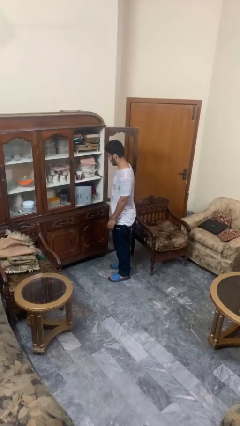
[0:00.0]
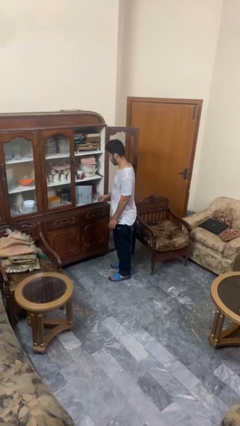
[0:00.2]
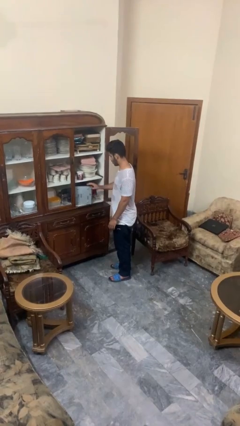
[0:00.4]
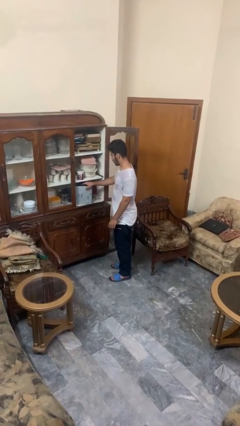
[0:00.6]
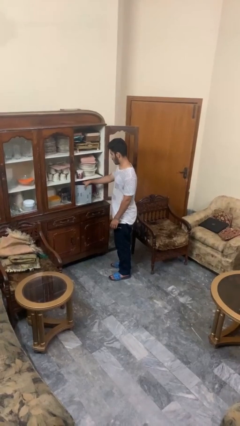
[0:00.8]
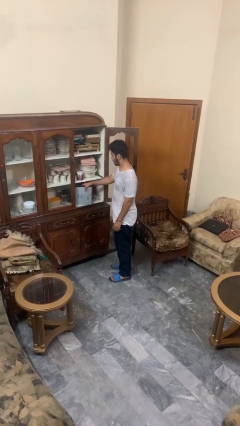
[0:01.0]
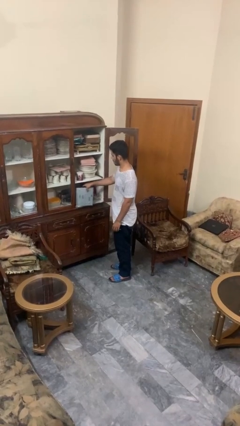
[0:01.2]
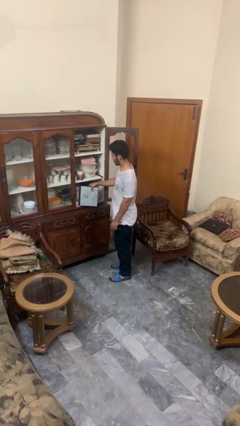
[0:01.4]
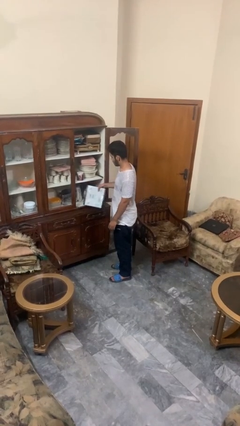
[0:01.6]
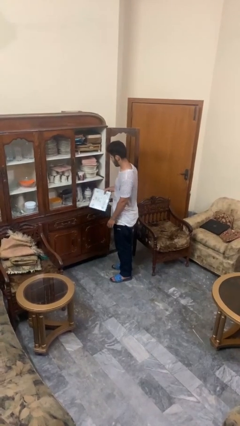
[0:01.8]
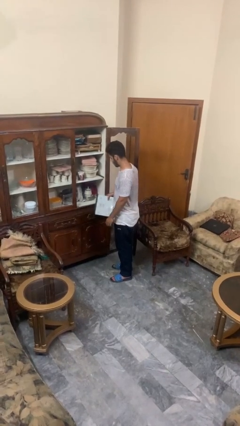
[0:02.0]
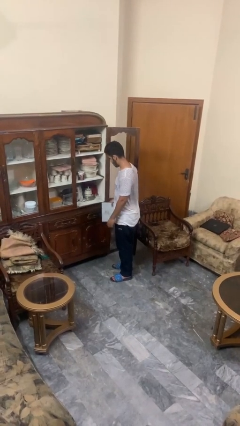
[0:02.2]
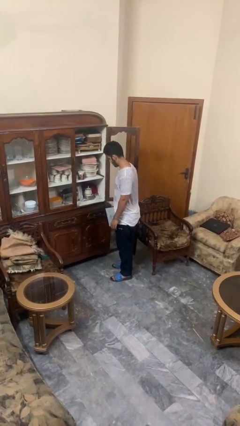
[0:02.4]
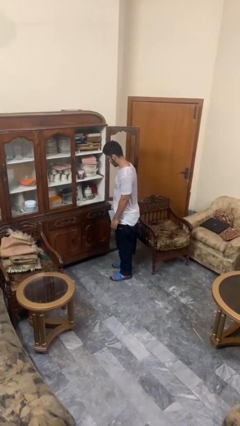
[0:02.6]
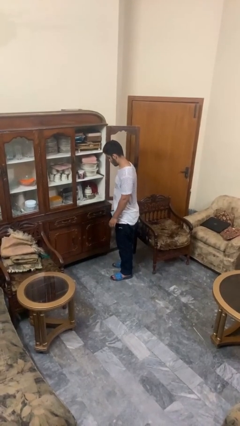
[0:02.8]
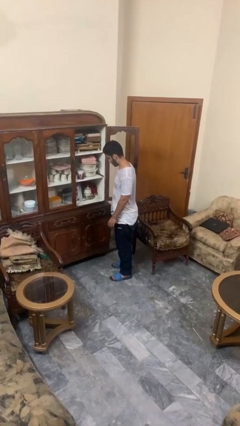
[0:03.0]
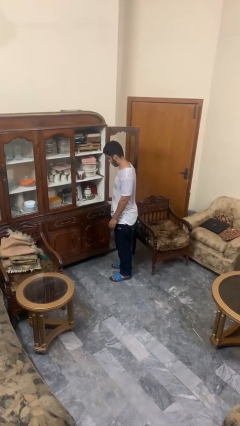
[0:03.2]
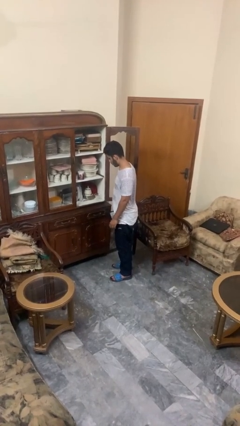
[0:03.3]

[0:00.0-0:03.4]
person picks up object from cabinet

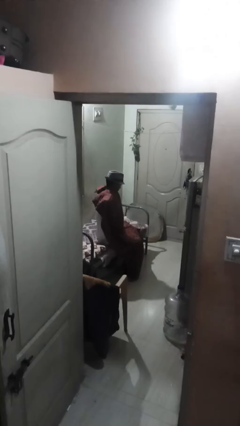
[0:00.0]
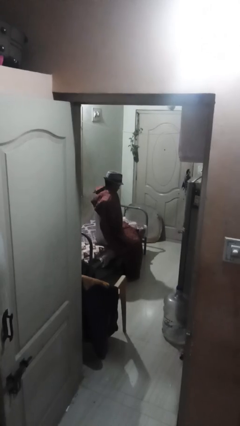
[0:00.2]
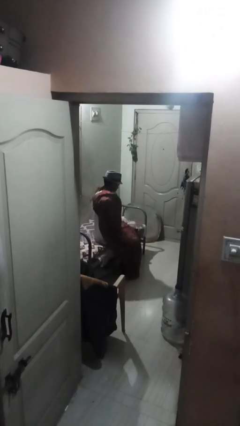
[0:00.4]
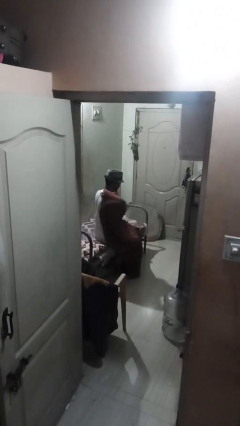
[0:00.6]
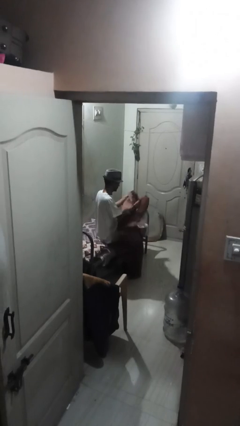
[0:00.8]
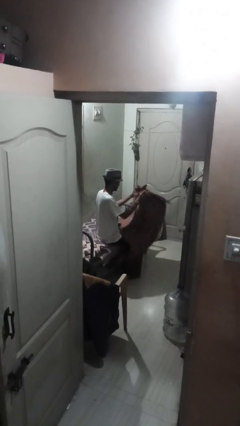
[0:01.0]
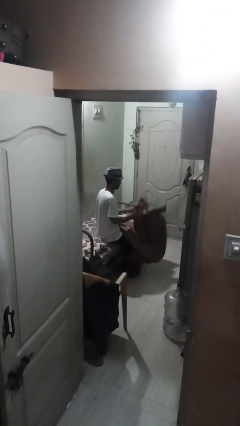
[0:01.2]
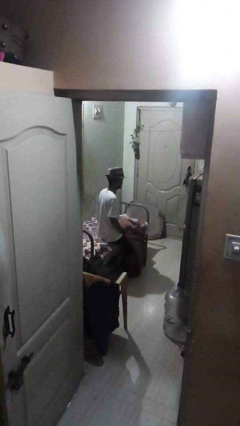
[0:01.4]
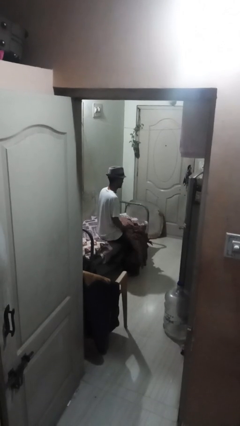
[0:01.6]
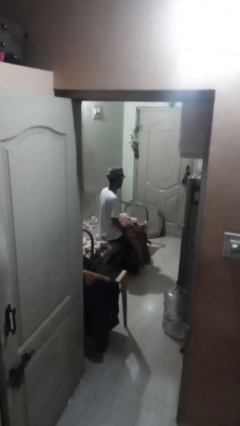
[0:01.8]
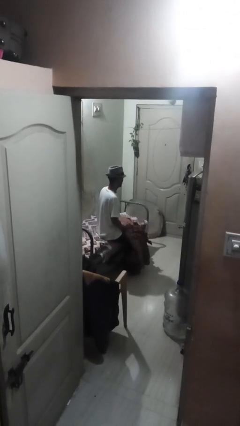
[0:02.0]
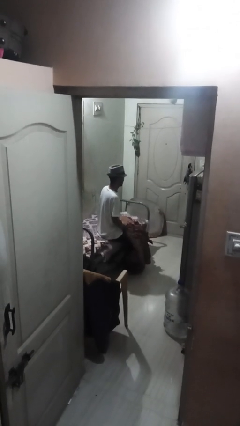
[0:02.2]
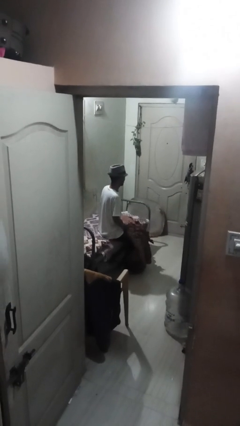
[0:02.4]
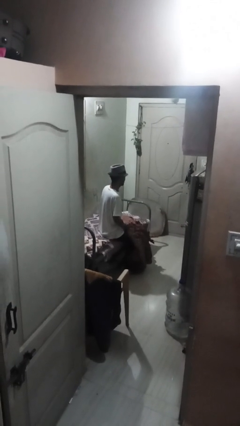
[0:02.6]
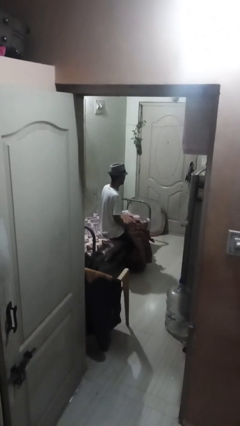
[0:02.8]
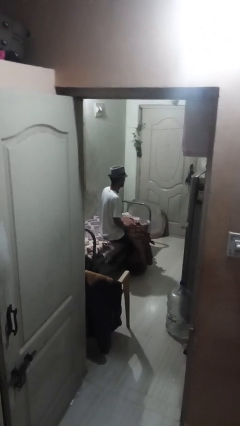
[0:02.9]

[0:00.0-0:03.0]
person uncovers with blanket

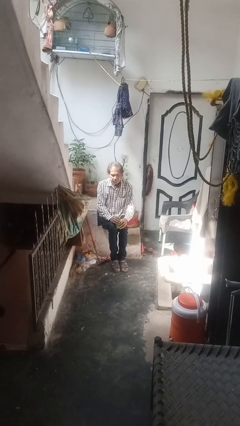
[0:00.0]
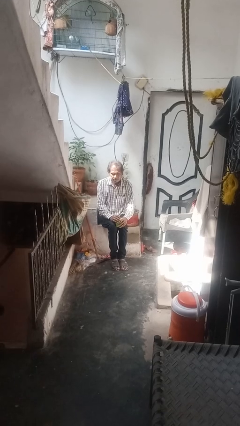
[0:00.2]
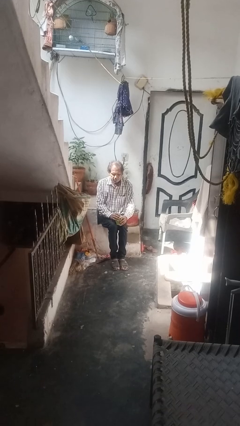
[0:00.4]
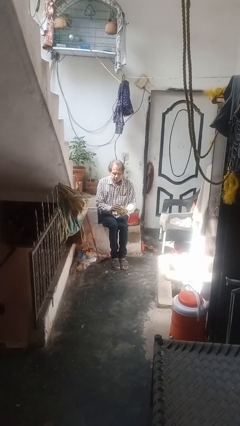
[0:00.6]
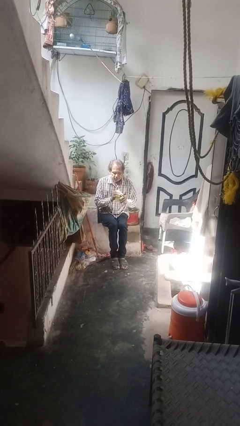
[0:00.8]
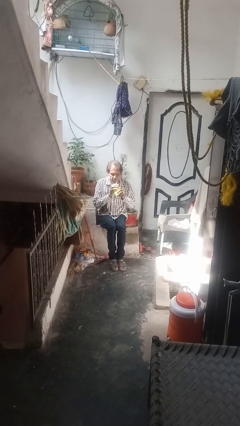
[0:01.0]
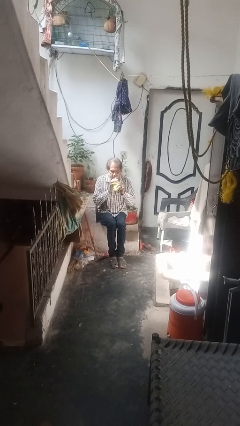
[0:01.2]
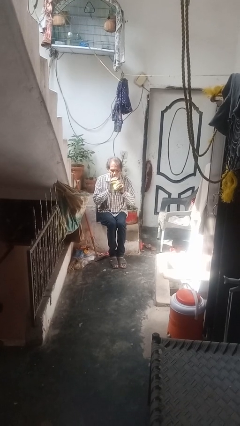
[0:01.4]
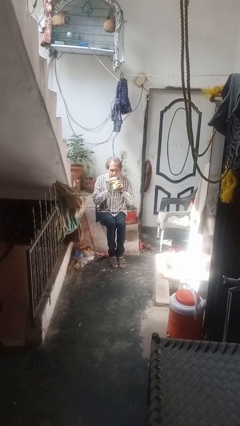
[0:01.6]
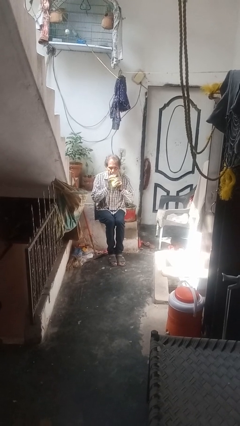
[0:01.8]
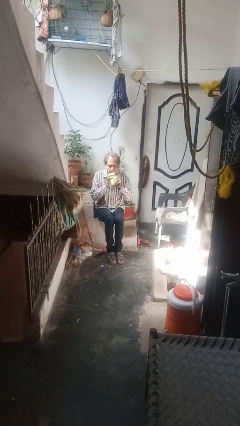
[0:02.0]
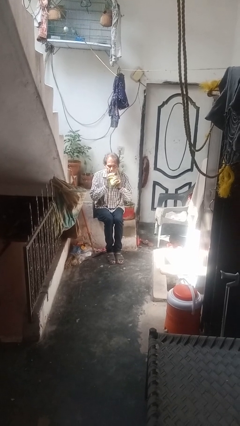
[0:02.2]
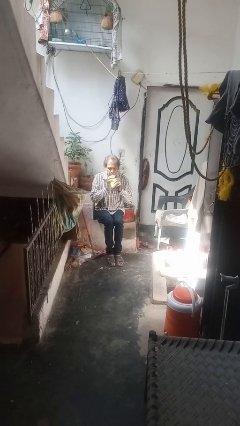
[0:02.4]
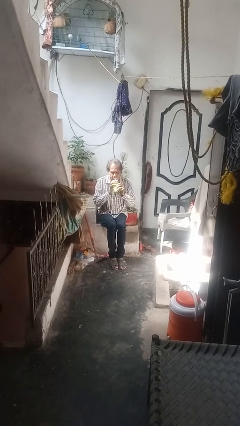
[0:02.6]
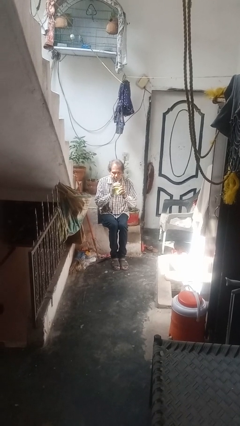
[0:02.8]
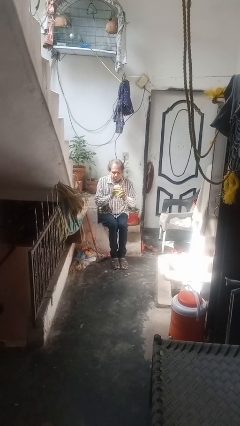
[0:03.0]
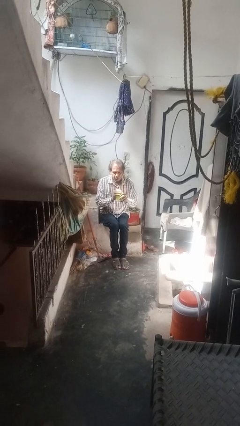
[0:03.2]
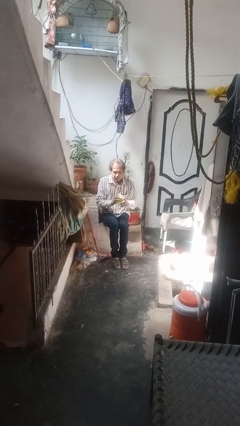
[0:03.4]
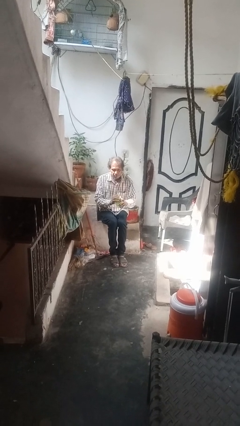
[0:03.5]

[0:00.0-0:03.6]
person drinks from straw

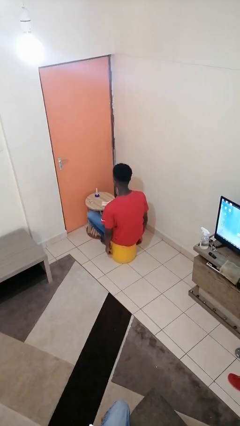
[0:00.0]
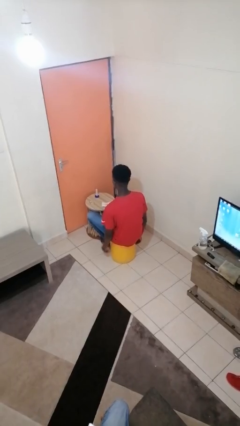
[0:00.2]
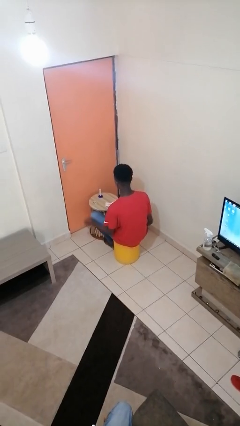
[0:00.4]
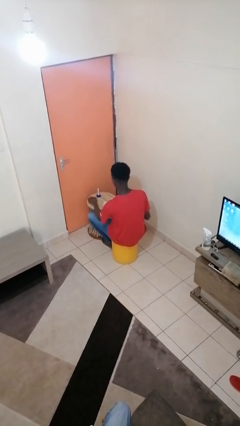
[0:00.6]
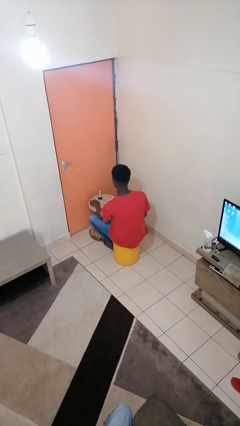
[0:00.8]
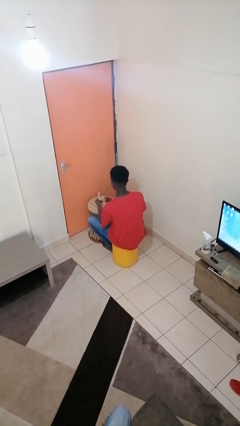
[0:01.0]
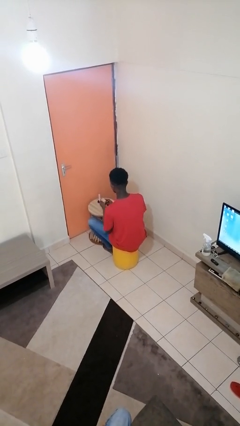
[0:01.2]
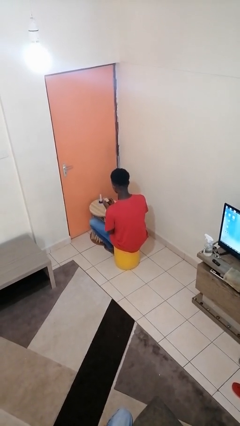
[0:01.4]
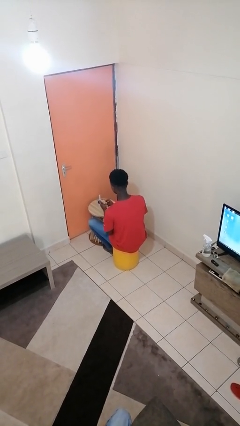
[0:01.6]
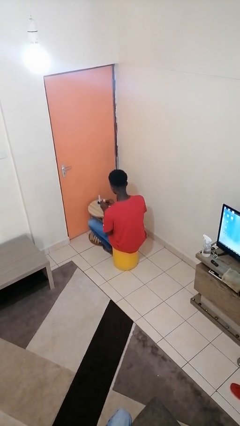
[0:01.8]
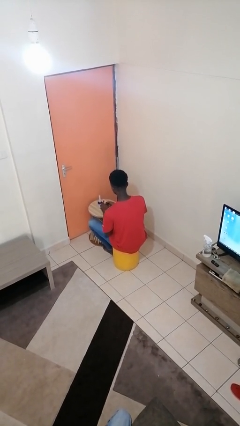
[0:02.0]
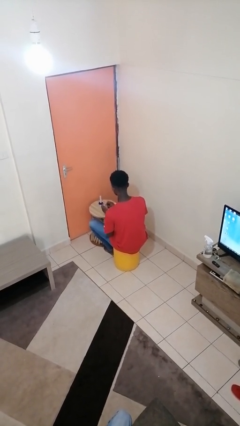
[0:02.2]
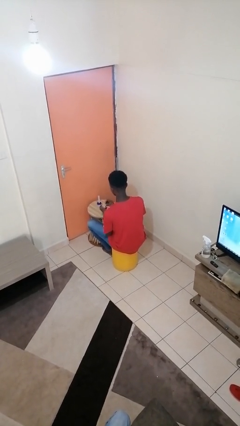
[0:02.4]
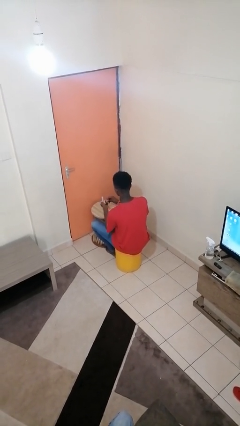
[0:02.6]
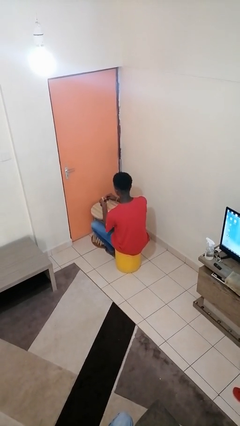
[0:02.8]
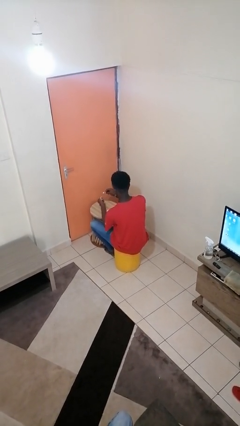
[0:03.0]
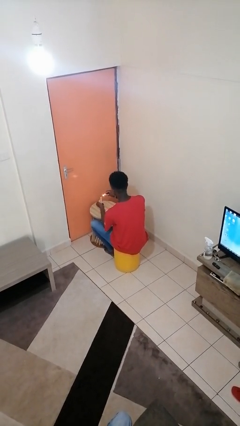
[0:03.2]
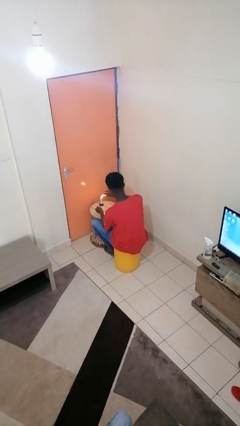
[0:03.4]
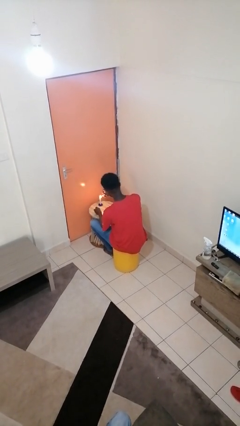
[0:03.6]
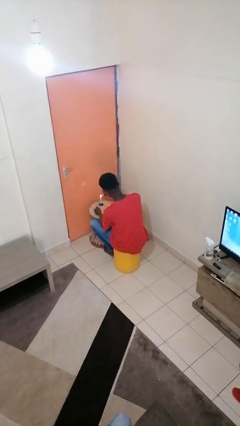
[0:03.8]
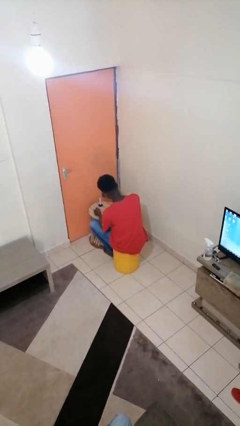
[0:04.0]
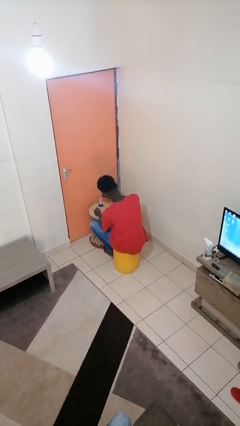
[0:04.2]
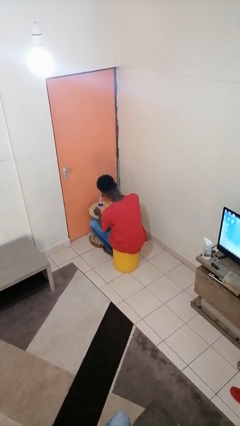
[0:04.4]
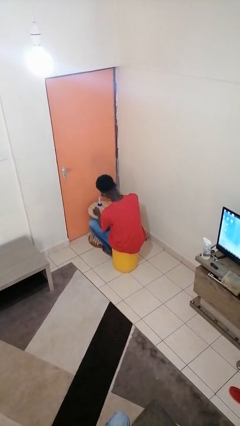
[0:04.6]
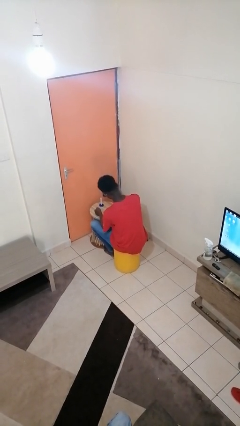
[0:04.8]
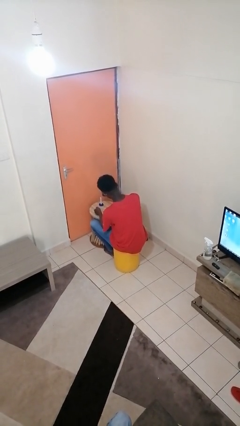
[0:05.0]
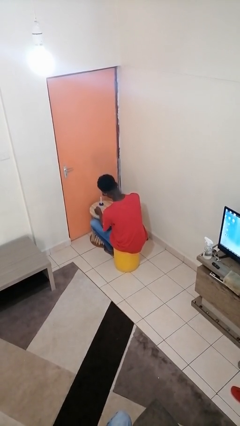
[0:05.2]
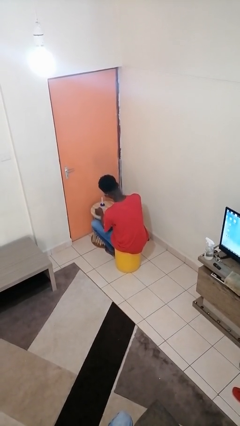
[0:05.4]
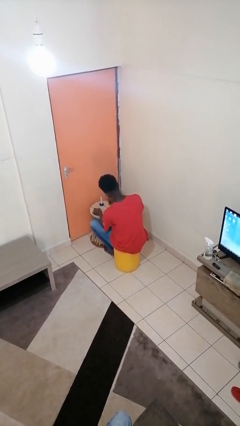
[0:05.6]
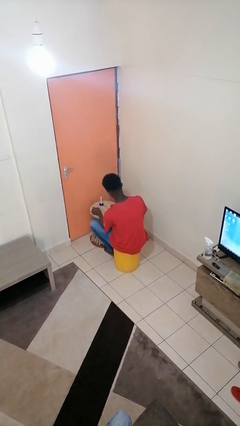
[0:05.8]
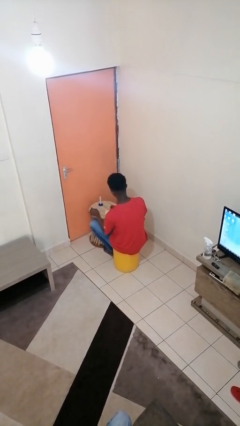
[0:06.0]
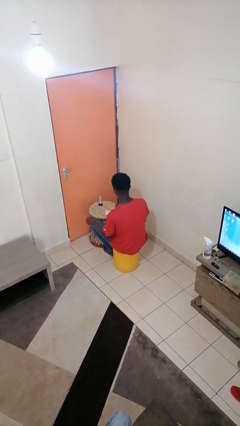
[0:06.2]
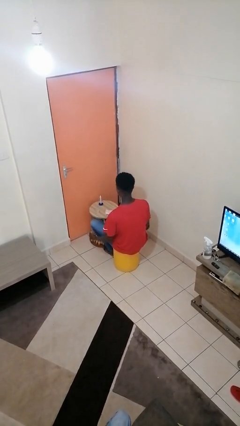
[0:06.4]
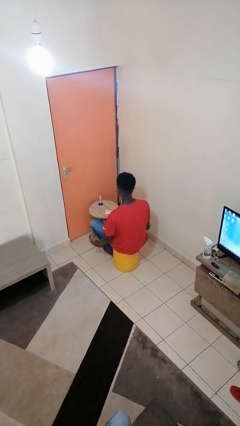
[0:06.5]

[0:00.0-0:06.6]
person lights candle

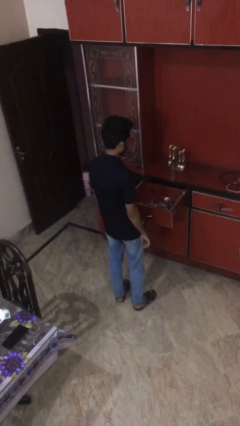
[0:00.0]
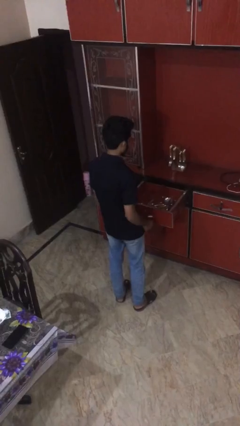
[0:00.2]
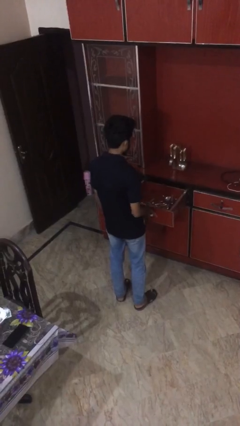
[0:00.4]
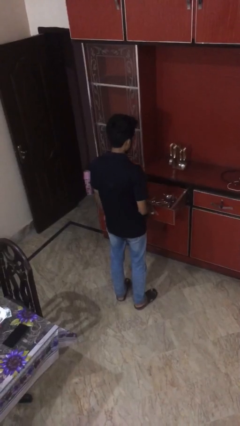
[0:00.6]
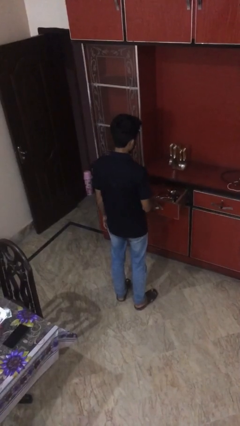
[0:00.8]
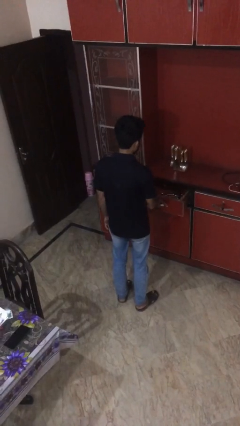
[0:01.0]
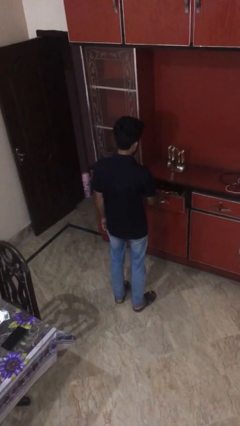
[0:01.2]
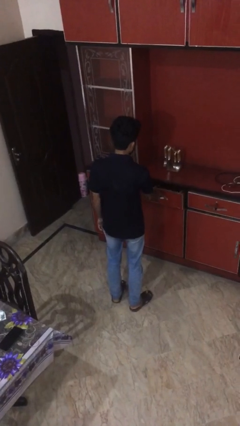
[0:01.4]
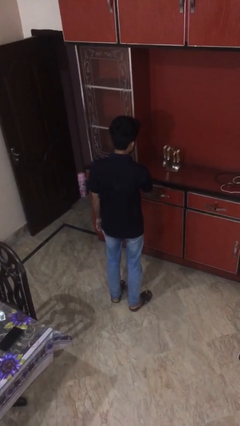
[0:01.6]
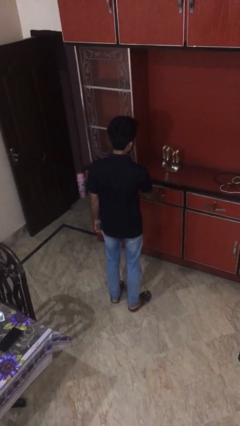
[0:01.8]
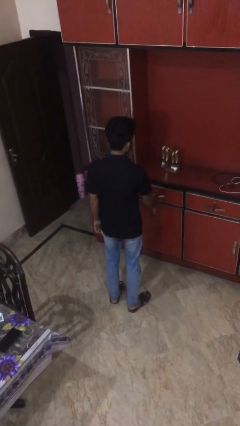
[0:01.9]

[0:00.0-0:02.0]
person closes kitchen drawer
